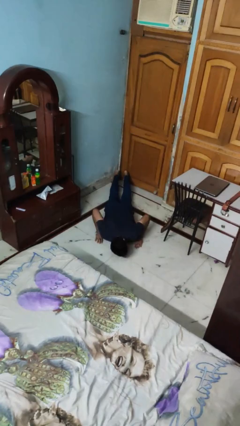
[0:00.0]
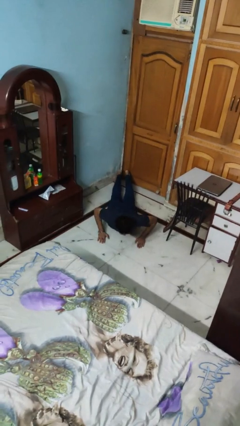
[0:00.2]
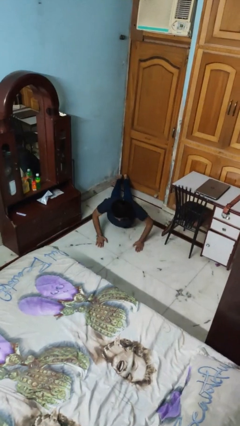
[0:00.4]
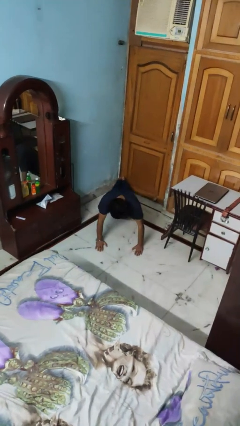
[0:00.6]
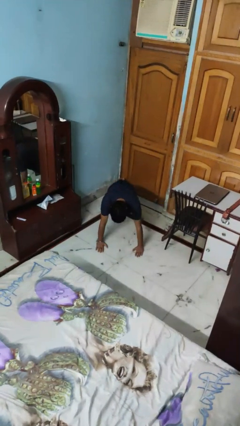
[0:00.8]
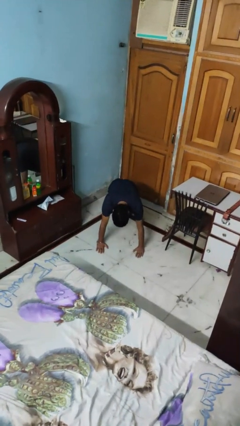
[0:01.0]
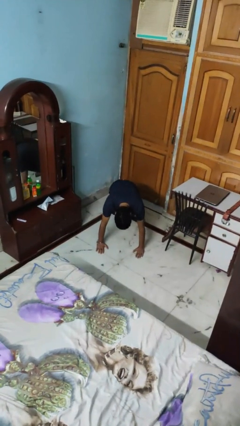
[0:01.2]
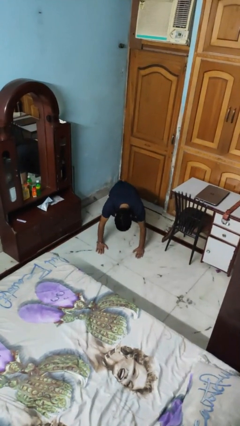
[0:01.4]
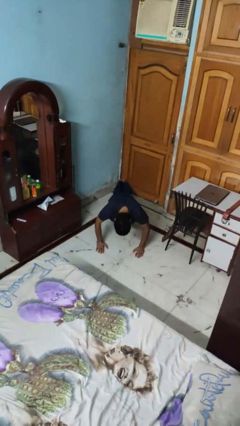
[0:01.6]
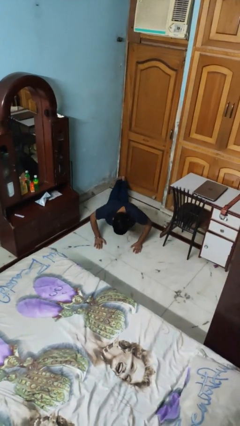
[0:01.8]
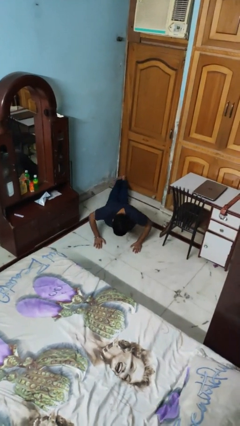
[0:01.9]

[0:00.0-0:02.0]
person exercises with pushup

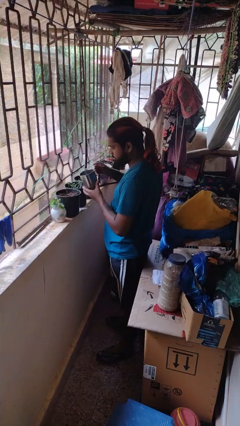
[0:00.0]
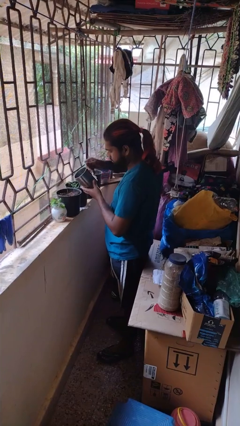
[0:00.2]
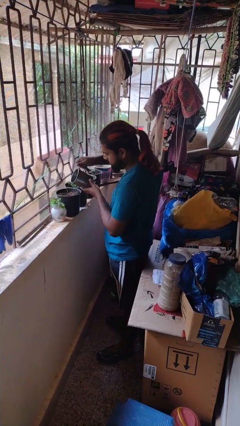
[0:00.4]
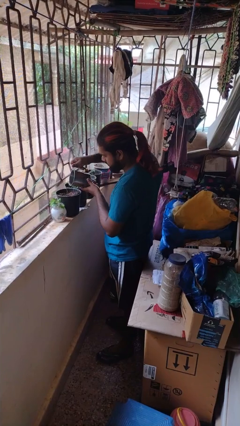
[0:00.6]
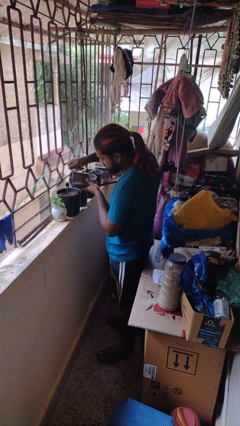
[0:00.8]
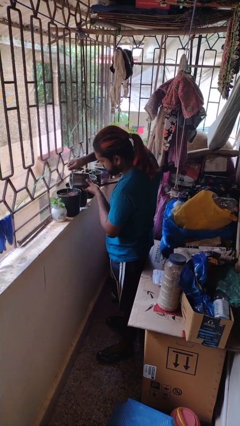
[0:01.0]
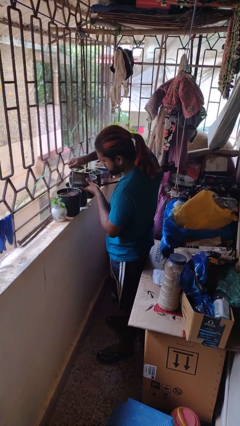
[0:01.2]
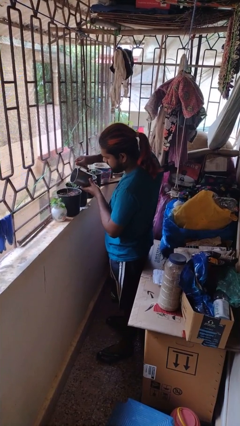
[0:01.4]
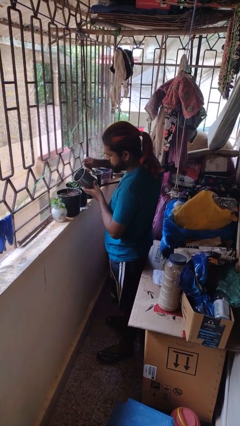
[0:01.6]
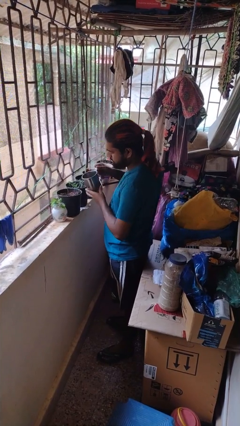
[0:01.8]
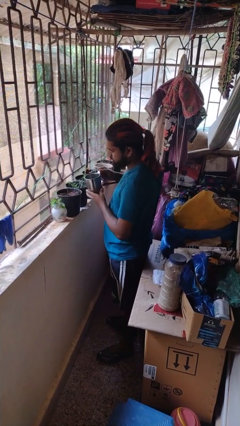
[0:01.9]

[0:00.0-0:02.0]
person waters houseplant

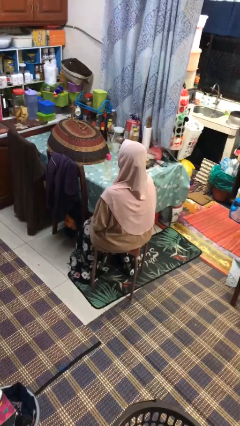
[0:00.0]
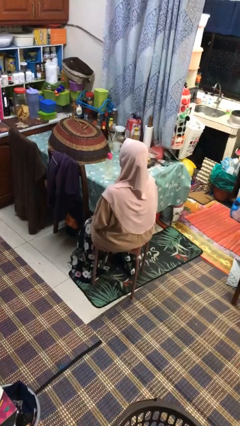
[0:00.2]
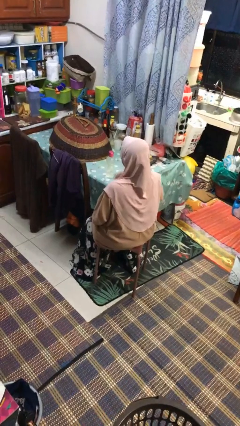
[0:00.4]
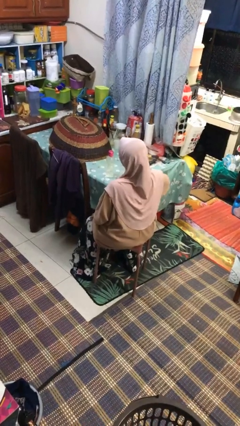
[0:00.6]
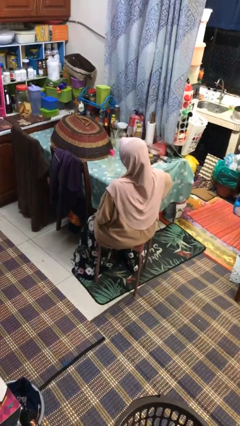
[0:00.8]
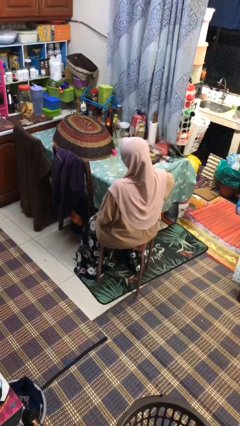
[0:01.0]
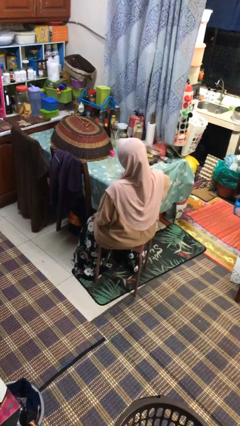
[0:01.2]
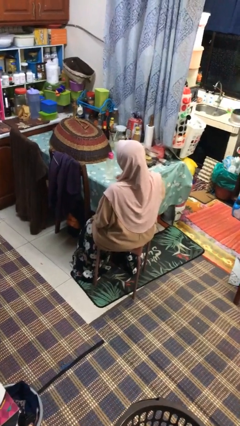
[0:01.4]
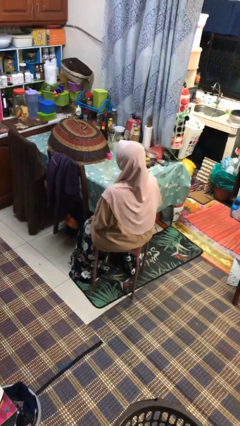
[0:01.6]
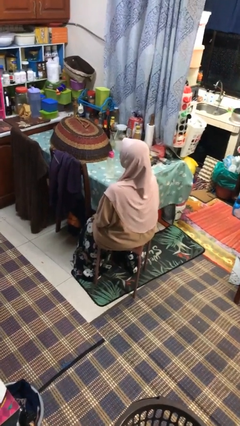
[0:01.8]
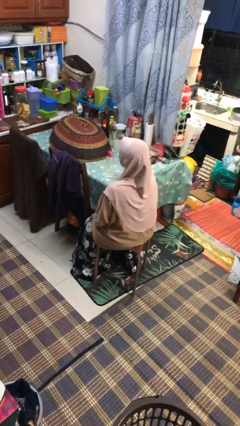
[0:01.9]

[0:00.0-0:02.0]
person drums on chest

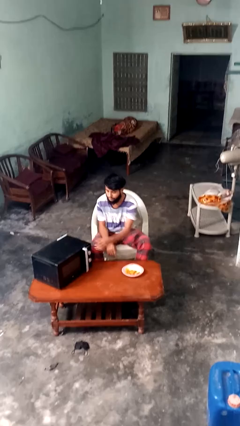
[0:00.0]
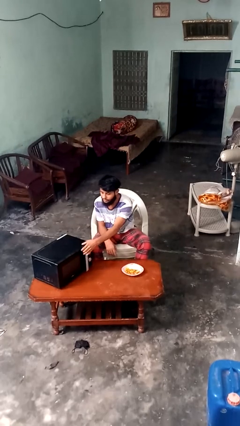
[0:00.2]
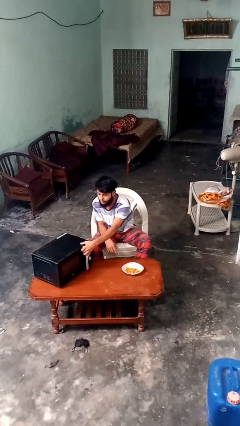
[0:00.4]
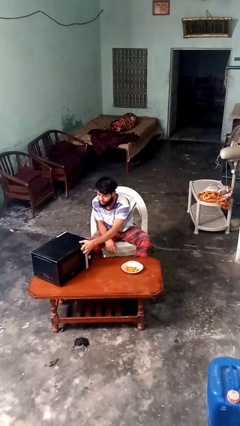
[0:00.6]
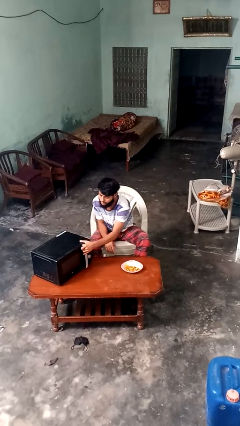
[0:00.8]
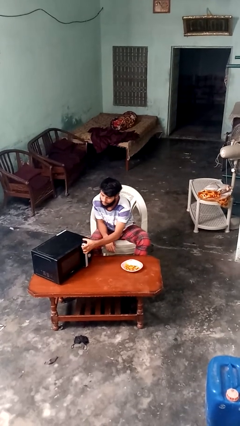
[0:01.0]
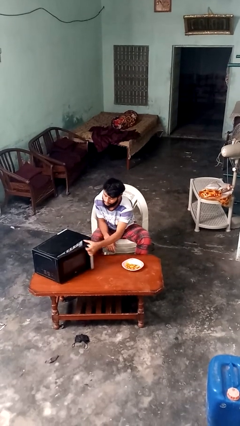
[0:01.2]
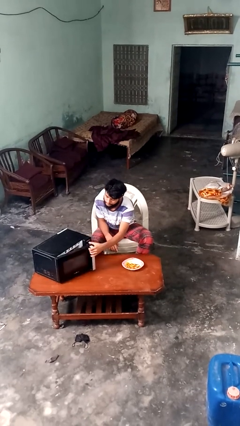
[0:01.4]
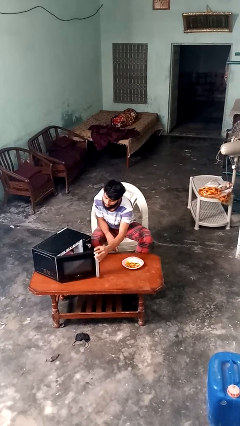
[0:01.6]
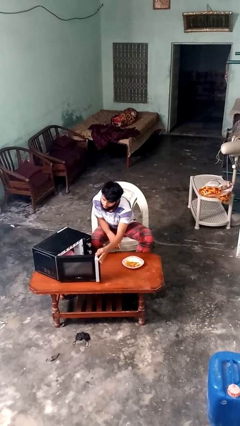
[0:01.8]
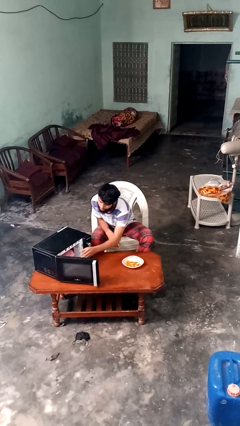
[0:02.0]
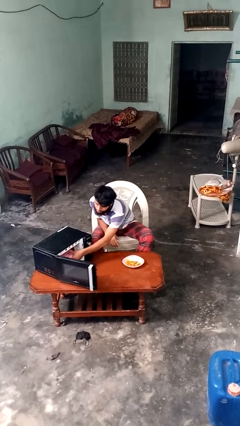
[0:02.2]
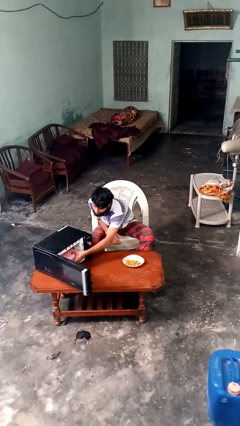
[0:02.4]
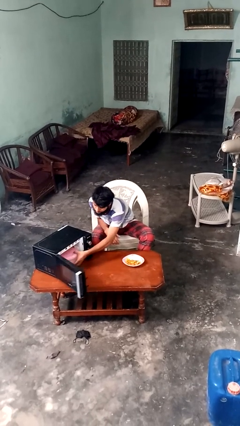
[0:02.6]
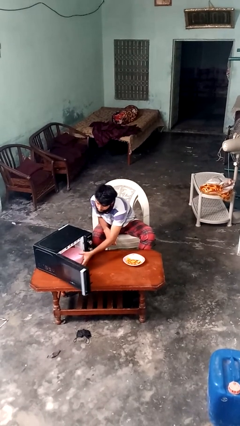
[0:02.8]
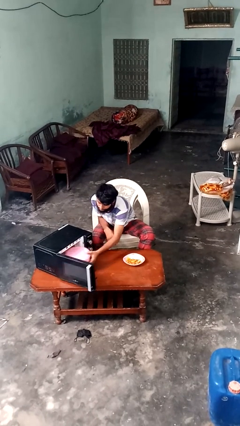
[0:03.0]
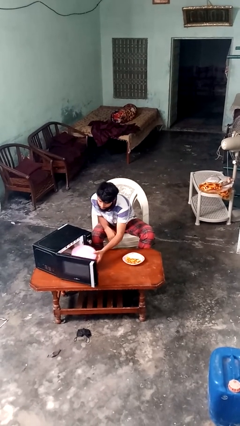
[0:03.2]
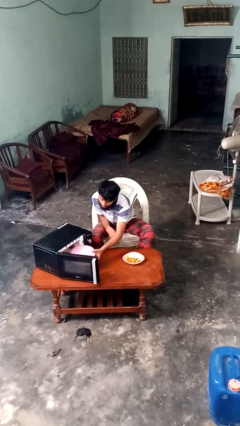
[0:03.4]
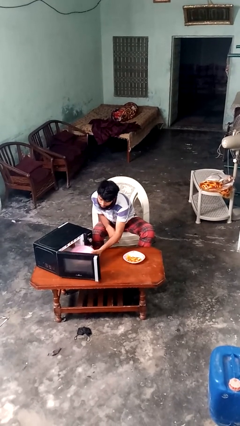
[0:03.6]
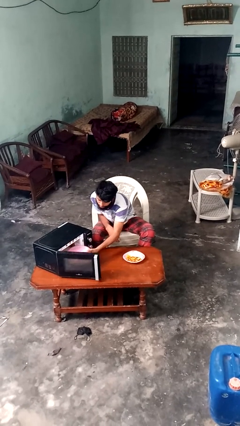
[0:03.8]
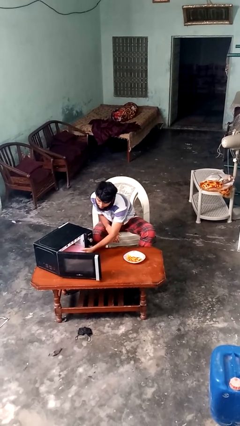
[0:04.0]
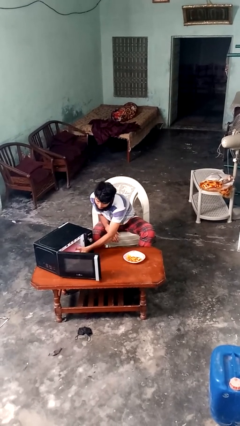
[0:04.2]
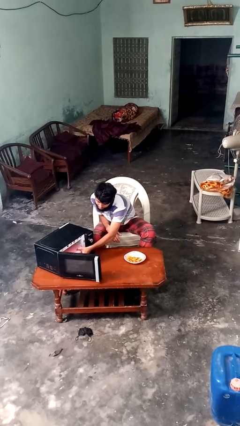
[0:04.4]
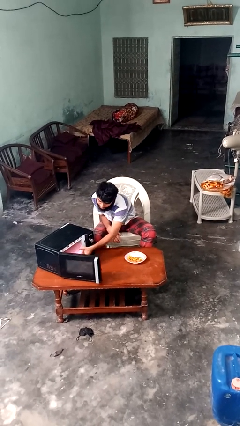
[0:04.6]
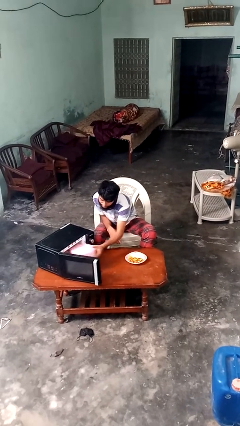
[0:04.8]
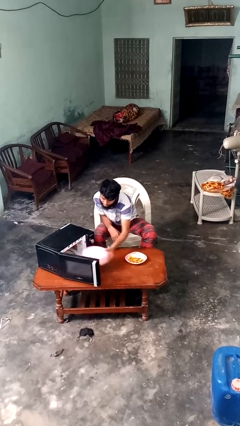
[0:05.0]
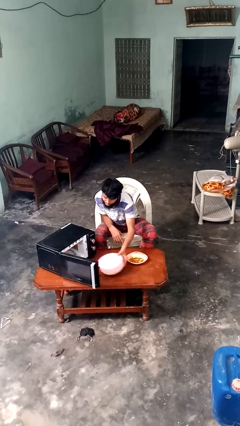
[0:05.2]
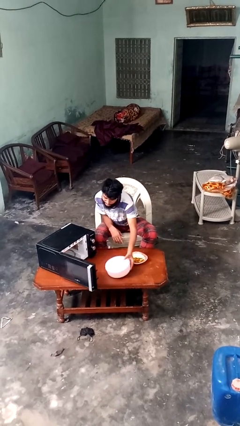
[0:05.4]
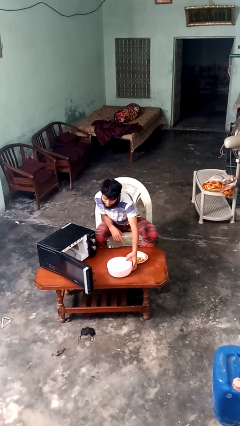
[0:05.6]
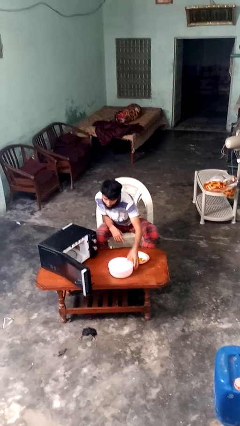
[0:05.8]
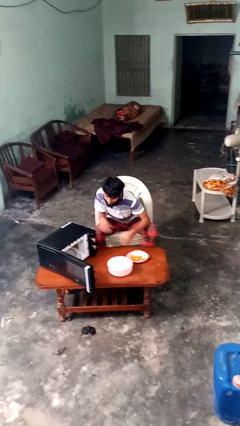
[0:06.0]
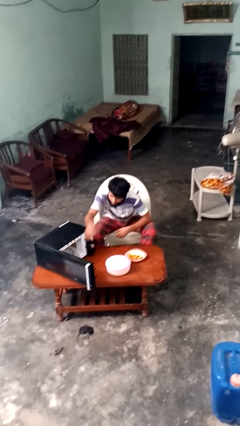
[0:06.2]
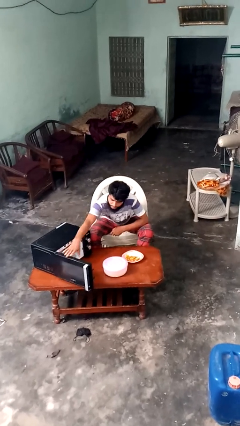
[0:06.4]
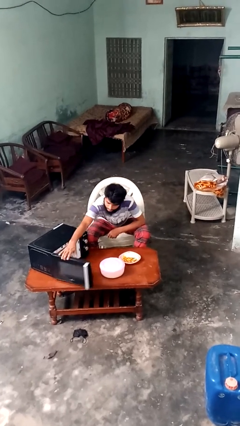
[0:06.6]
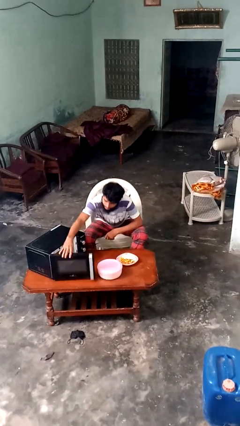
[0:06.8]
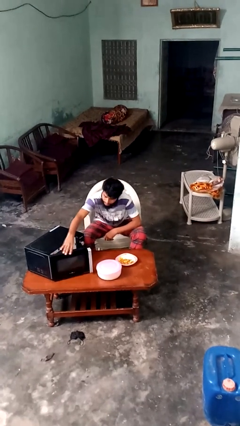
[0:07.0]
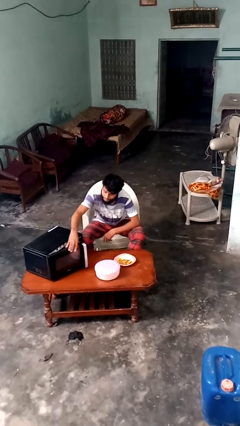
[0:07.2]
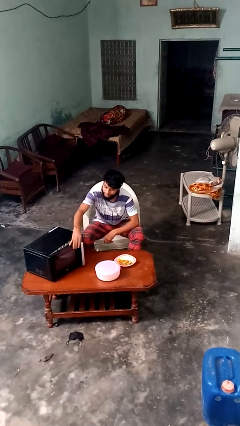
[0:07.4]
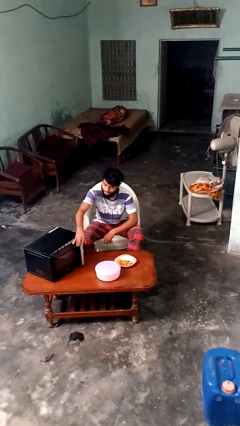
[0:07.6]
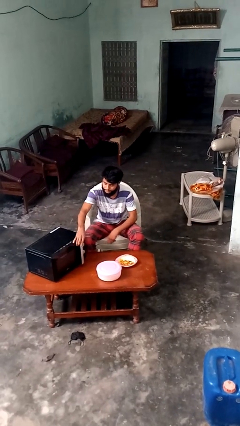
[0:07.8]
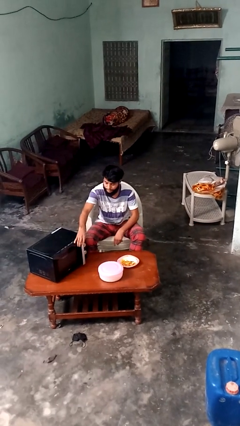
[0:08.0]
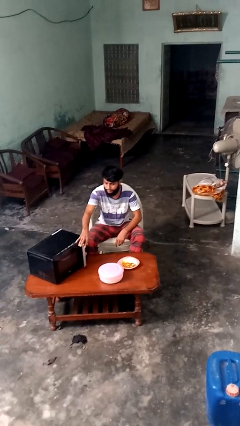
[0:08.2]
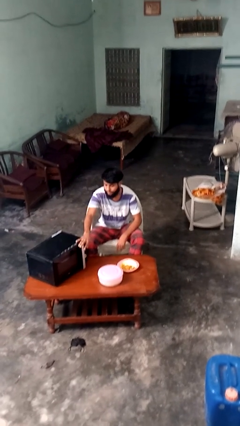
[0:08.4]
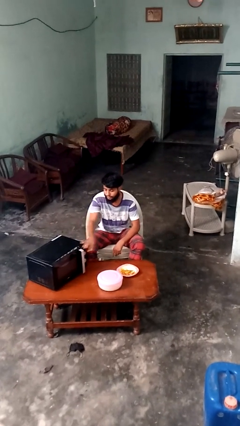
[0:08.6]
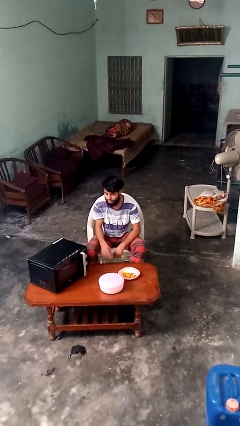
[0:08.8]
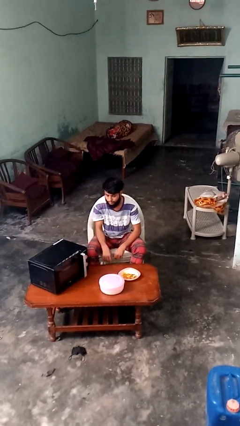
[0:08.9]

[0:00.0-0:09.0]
person takes object from microwave

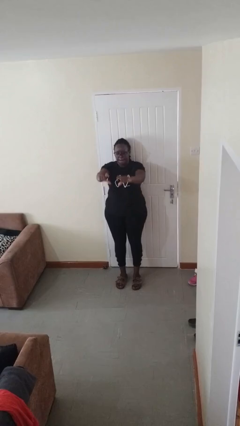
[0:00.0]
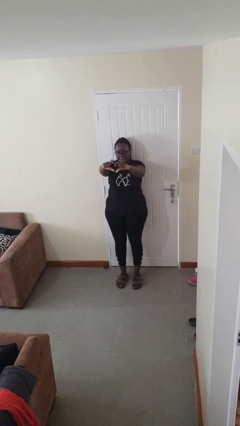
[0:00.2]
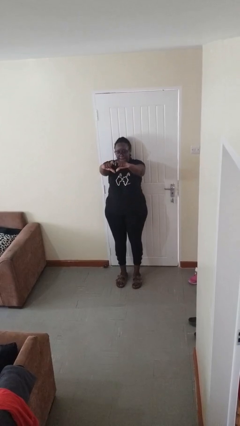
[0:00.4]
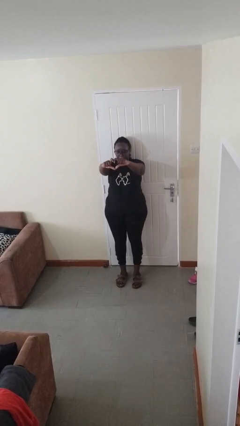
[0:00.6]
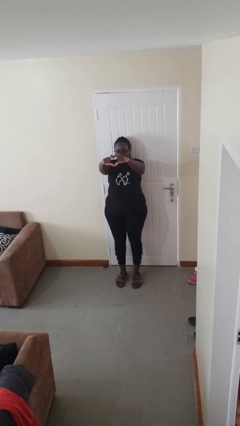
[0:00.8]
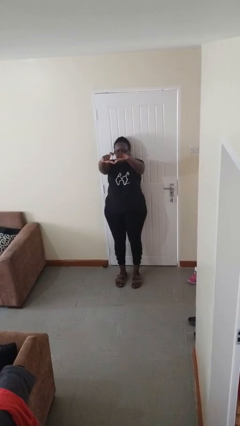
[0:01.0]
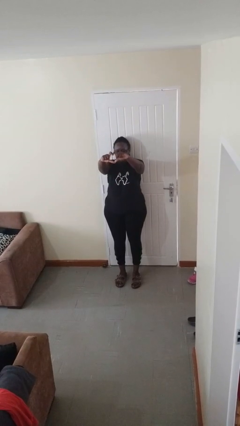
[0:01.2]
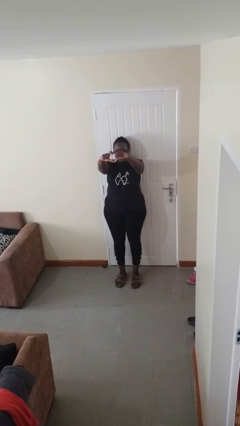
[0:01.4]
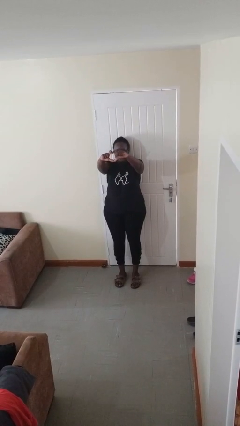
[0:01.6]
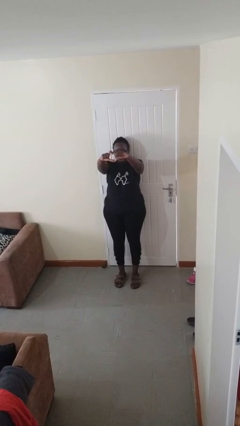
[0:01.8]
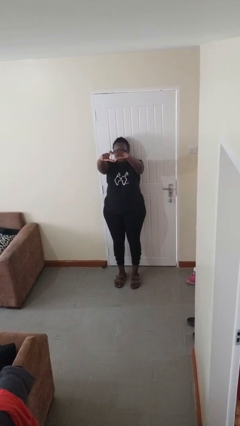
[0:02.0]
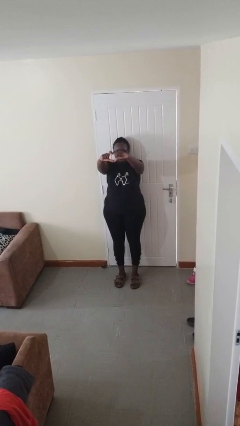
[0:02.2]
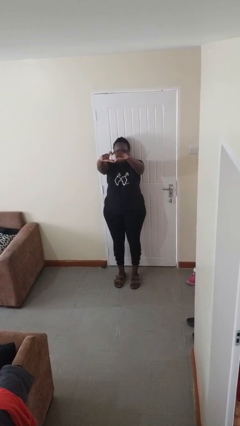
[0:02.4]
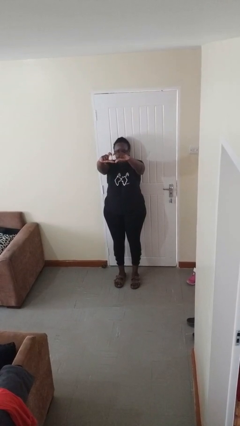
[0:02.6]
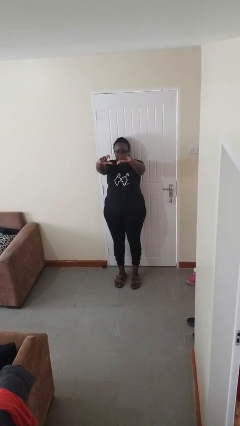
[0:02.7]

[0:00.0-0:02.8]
person gestures heart
